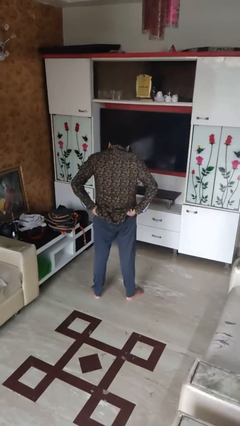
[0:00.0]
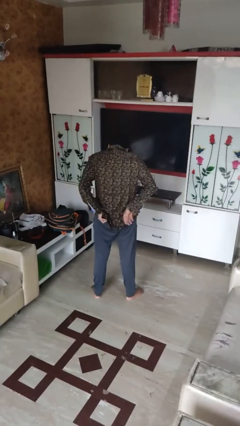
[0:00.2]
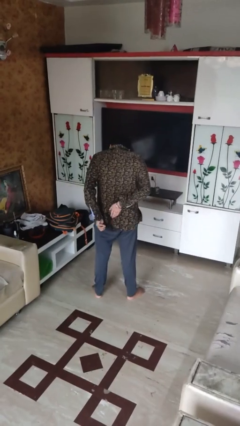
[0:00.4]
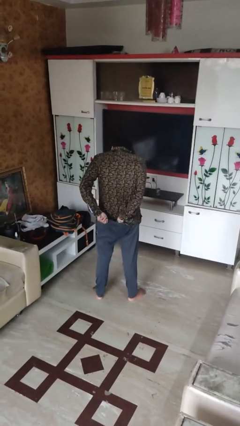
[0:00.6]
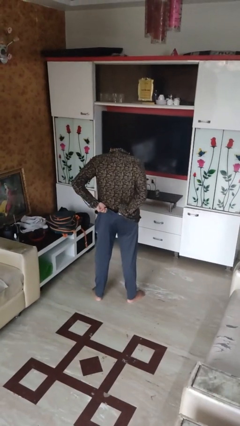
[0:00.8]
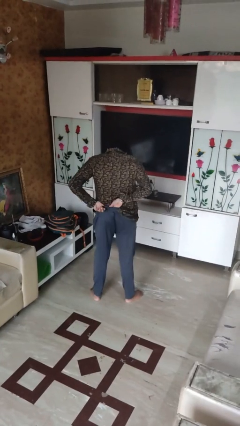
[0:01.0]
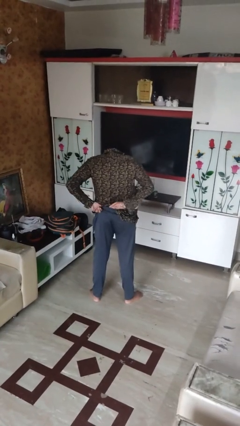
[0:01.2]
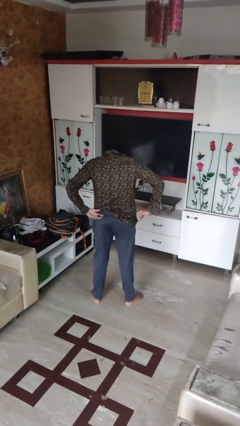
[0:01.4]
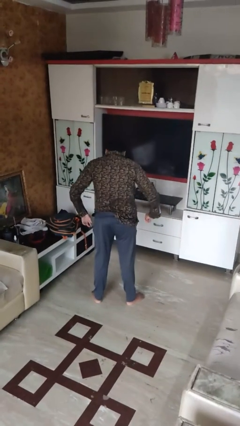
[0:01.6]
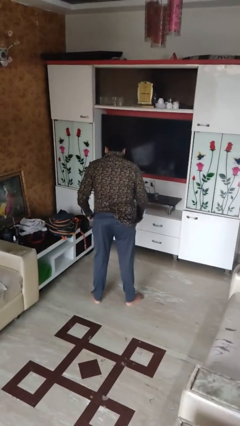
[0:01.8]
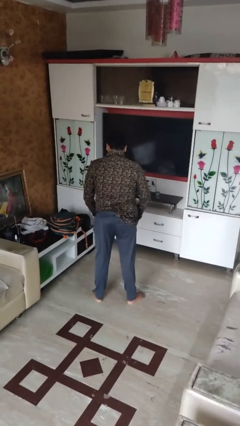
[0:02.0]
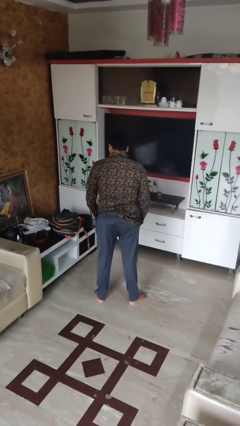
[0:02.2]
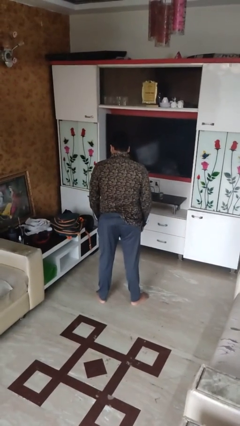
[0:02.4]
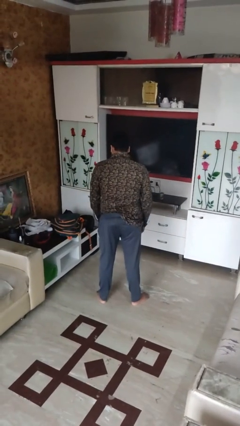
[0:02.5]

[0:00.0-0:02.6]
person tucks in shirt

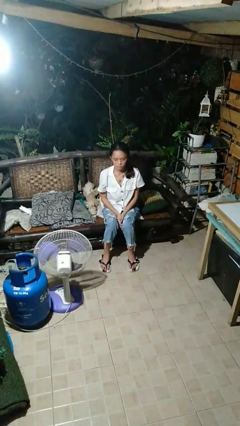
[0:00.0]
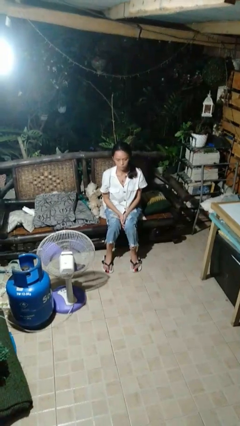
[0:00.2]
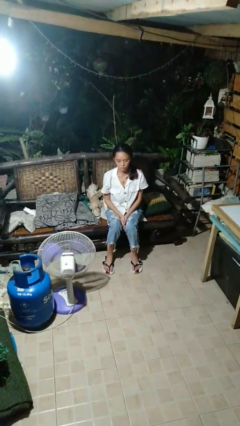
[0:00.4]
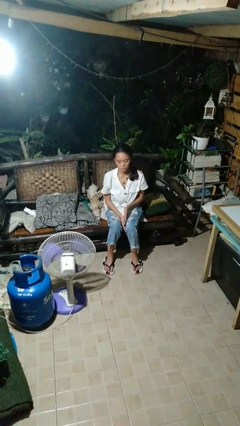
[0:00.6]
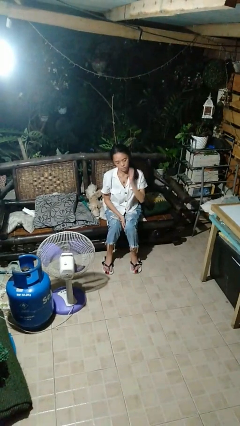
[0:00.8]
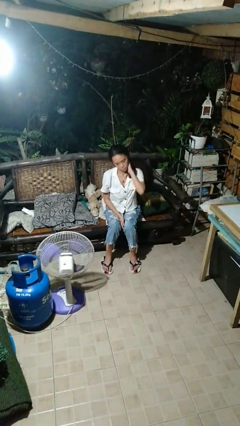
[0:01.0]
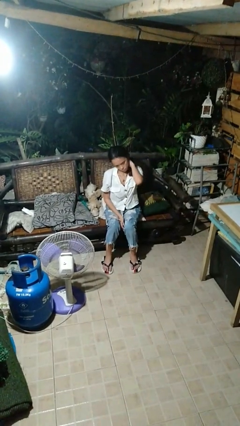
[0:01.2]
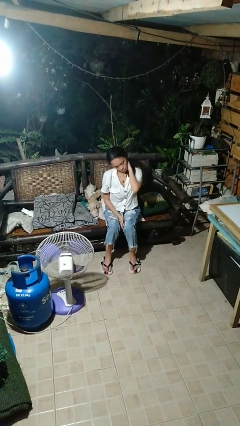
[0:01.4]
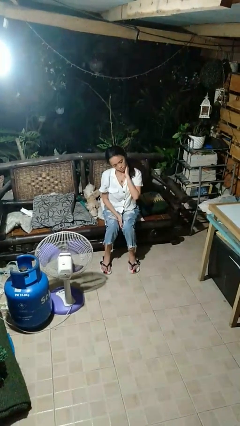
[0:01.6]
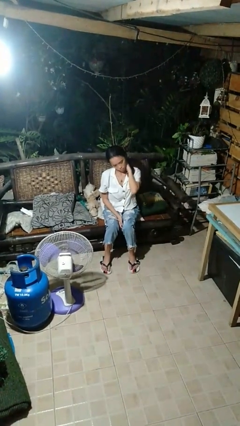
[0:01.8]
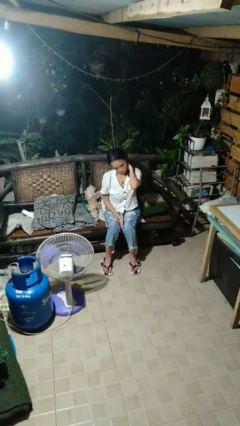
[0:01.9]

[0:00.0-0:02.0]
person rubs neck

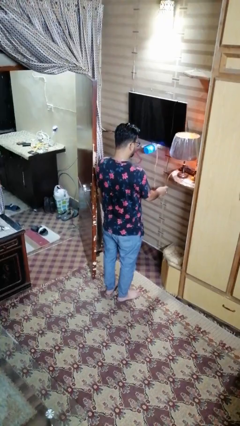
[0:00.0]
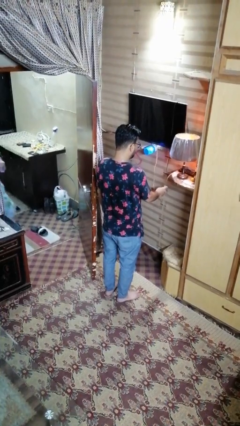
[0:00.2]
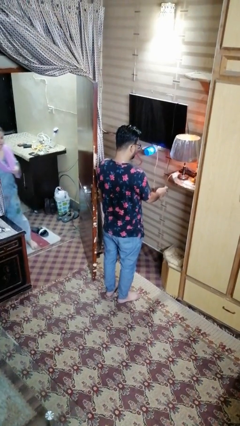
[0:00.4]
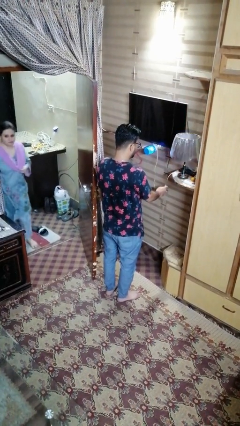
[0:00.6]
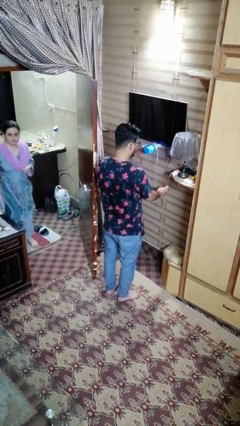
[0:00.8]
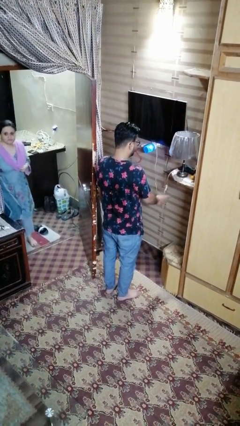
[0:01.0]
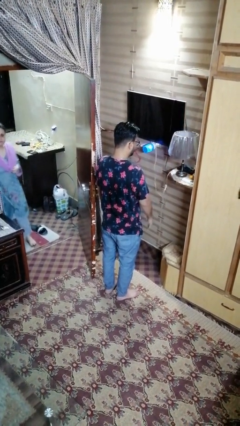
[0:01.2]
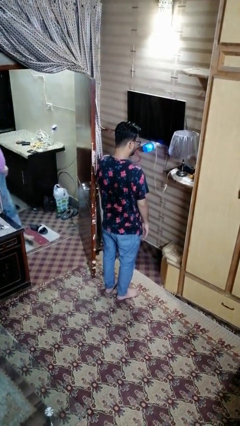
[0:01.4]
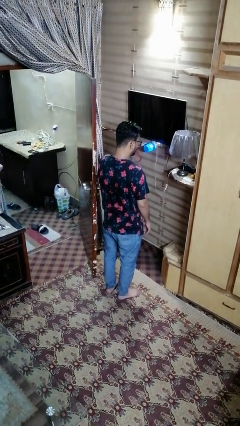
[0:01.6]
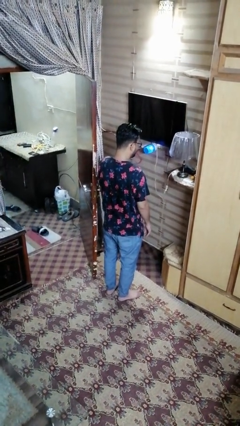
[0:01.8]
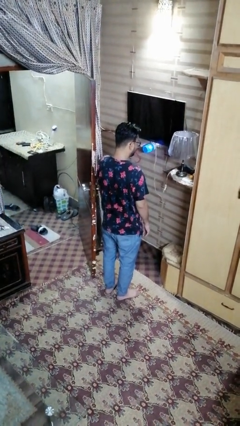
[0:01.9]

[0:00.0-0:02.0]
person turns off lamp

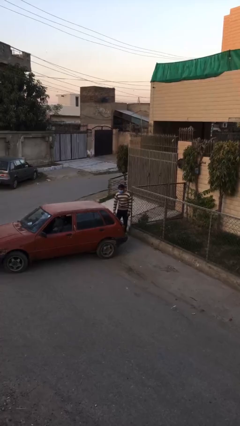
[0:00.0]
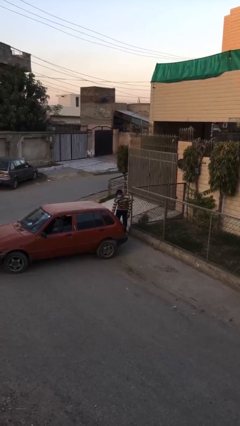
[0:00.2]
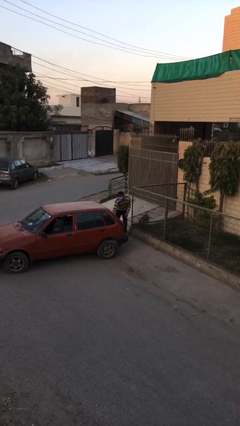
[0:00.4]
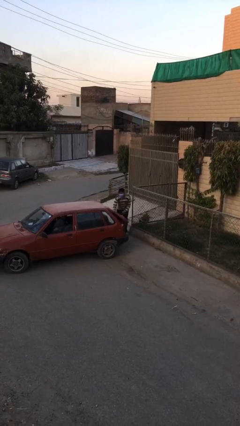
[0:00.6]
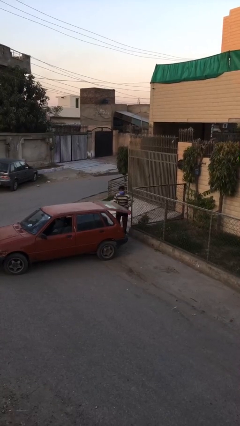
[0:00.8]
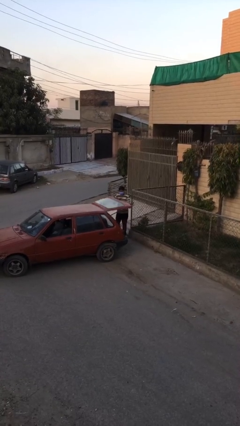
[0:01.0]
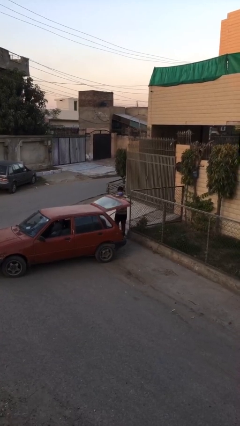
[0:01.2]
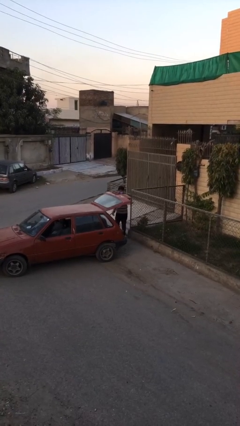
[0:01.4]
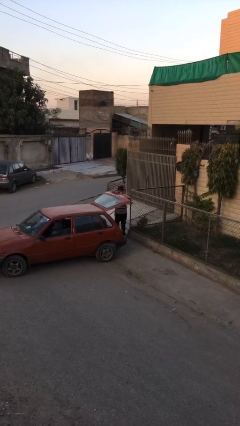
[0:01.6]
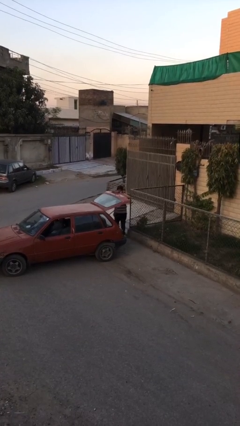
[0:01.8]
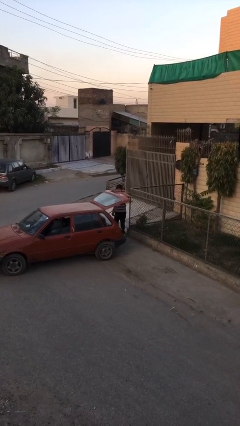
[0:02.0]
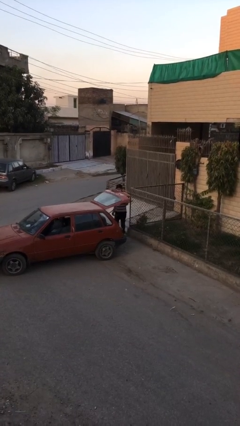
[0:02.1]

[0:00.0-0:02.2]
person opens car trunk

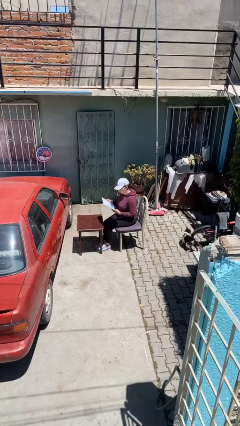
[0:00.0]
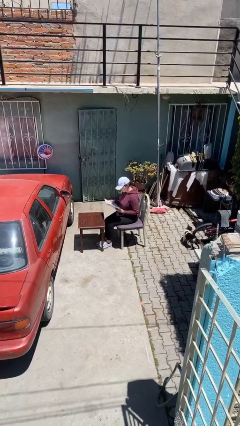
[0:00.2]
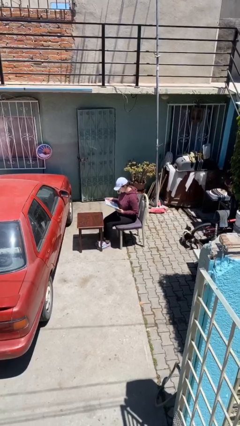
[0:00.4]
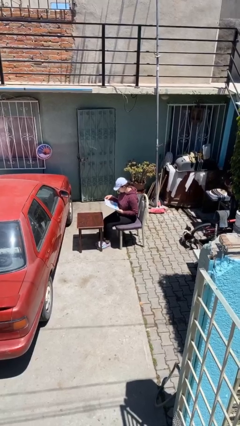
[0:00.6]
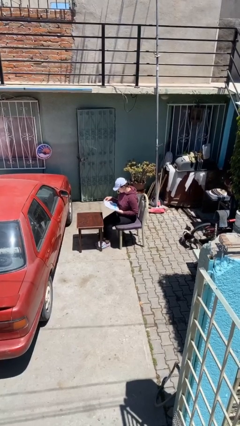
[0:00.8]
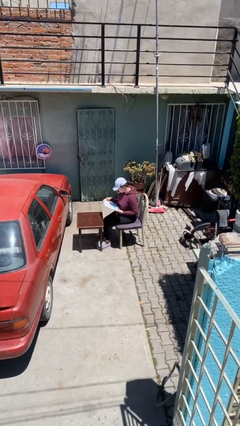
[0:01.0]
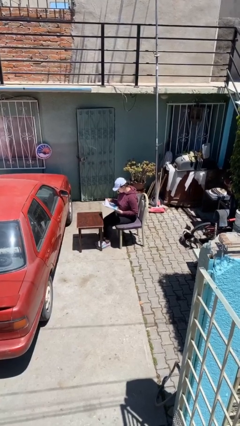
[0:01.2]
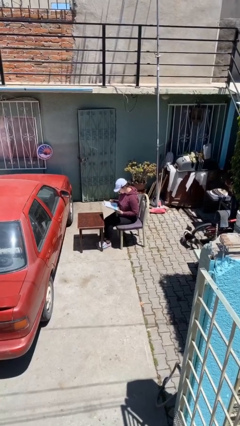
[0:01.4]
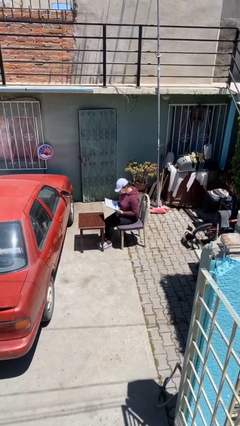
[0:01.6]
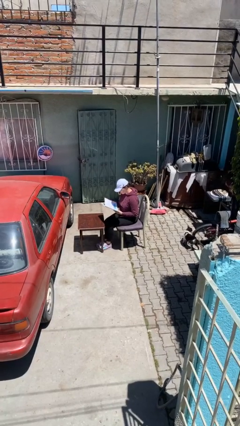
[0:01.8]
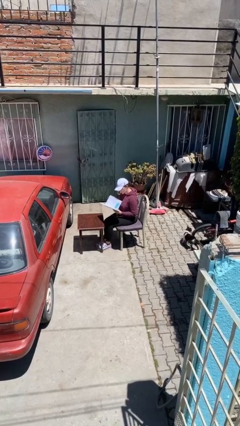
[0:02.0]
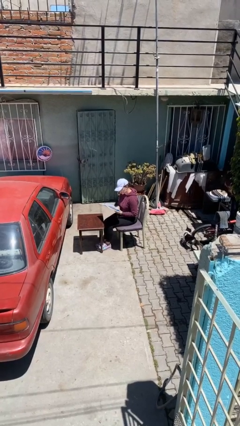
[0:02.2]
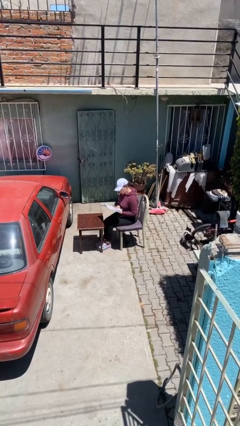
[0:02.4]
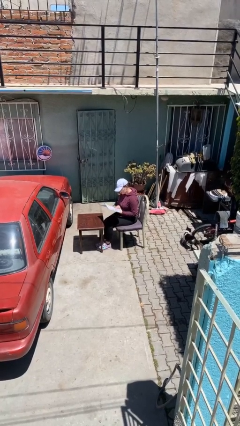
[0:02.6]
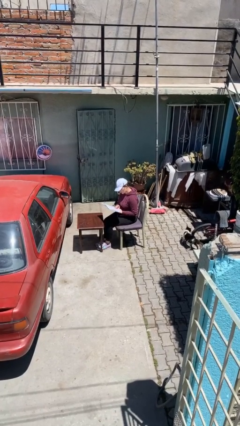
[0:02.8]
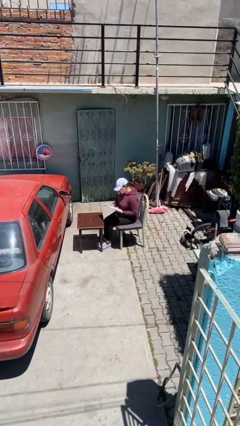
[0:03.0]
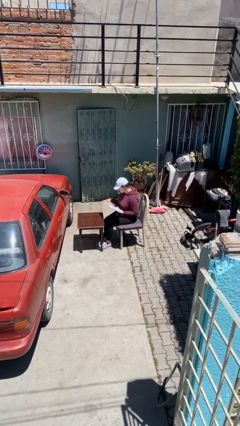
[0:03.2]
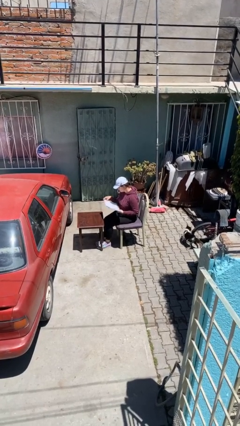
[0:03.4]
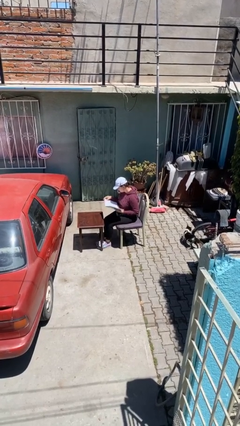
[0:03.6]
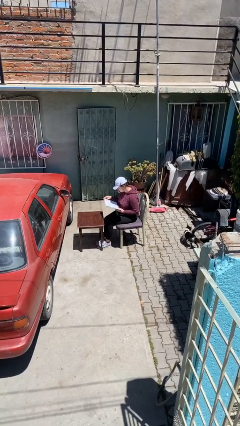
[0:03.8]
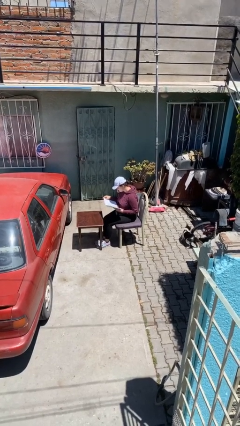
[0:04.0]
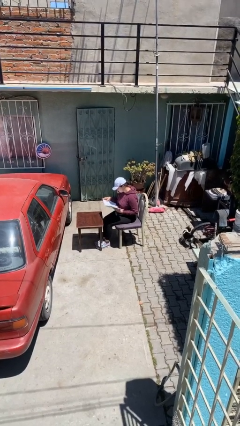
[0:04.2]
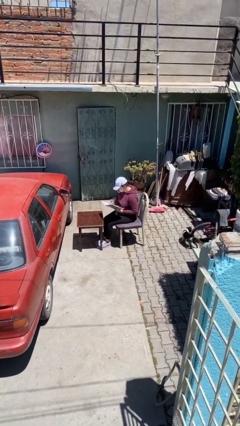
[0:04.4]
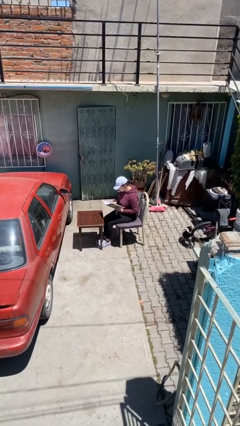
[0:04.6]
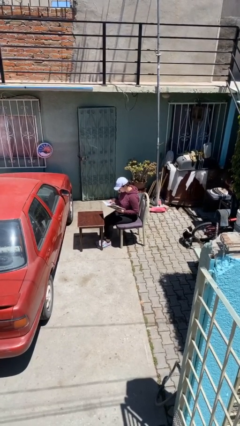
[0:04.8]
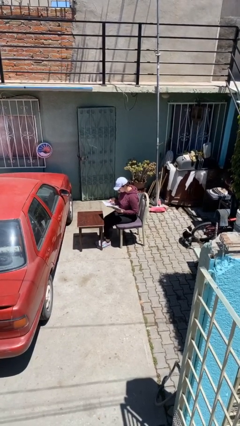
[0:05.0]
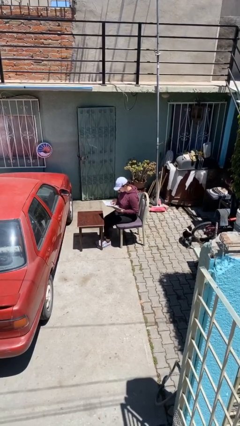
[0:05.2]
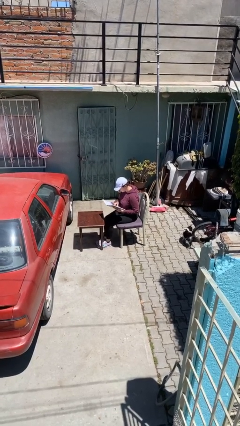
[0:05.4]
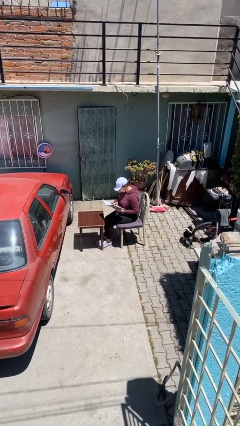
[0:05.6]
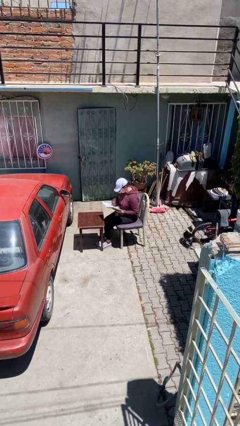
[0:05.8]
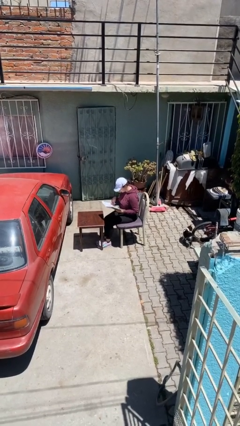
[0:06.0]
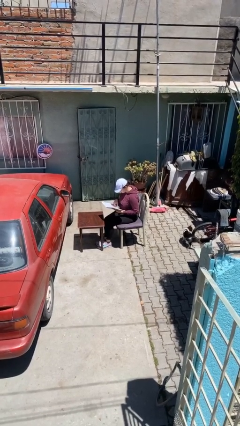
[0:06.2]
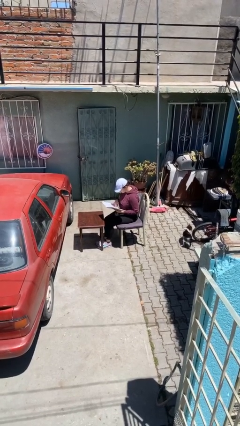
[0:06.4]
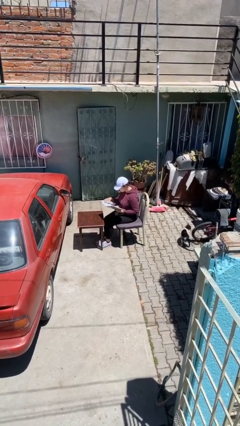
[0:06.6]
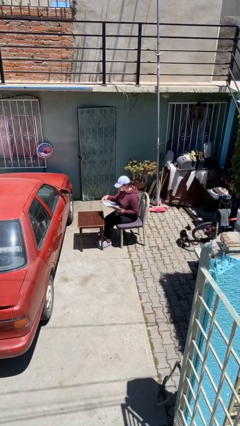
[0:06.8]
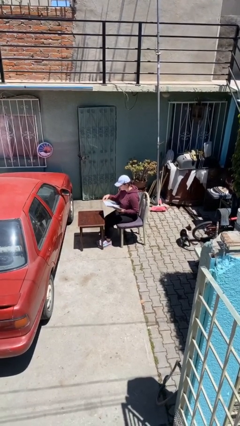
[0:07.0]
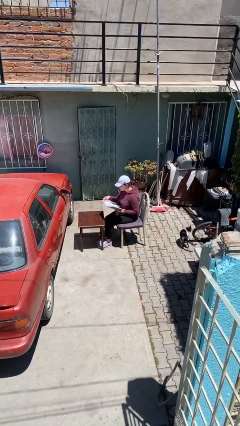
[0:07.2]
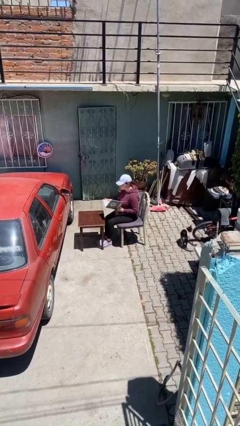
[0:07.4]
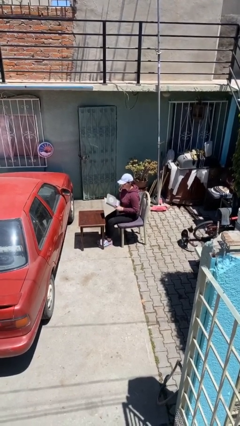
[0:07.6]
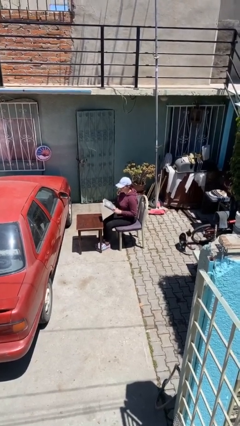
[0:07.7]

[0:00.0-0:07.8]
person reads document

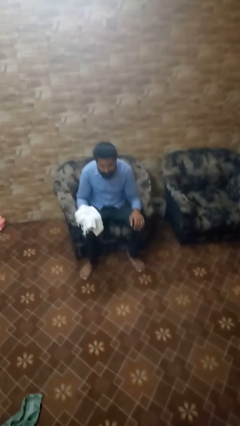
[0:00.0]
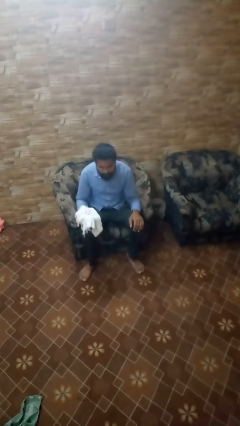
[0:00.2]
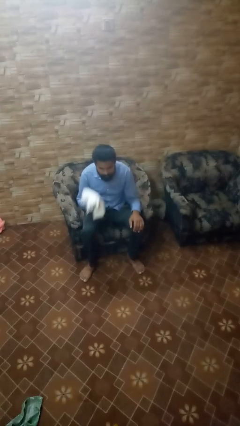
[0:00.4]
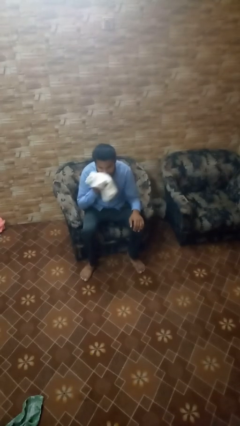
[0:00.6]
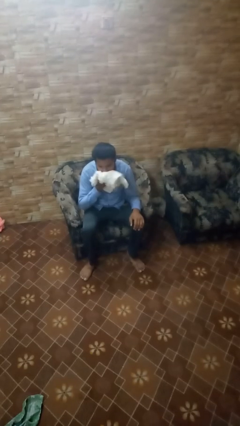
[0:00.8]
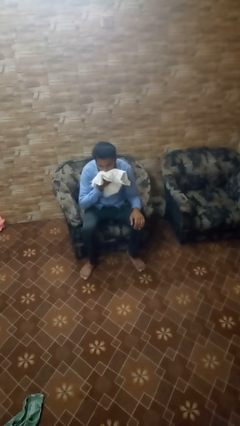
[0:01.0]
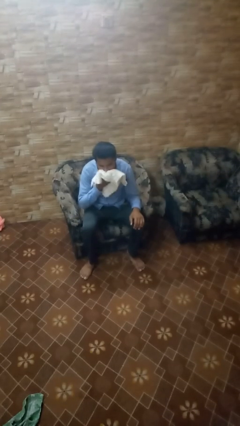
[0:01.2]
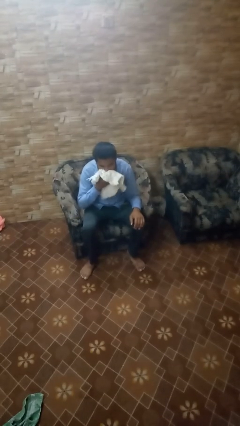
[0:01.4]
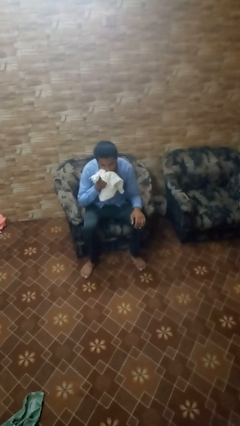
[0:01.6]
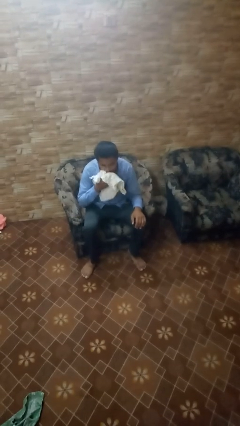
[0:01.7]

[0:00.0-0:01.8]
person wipes mouth with napkin
